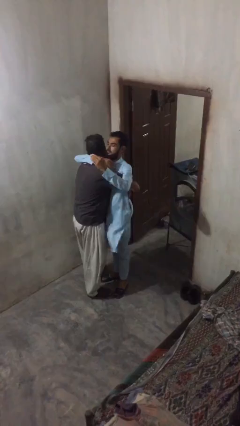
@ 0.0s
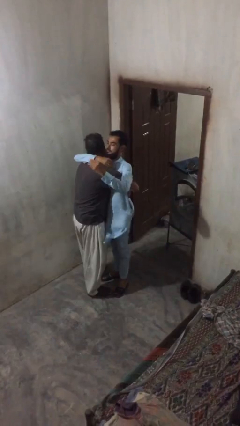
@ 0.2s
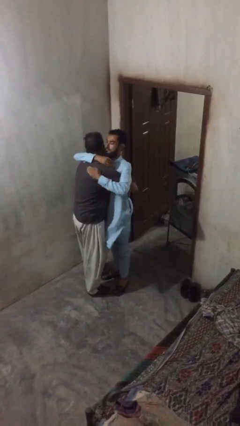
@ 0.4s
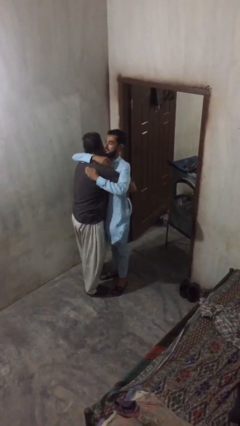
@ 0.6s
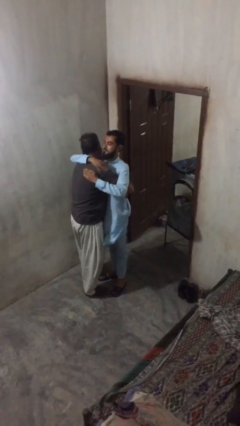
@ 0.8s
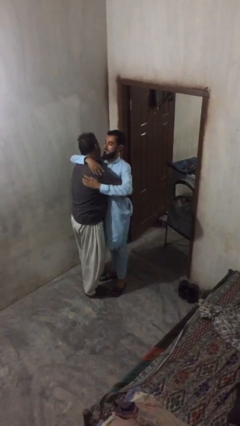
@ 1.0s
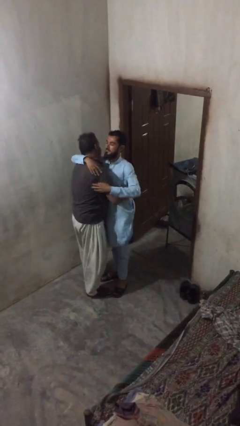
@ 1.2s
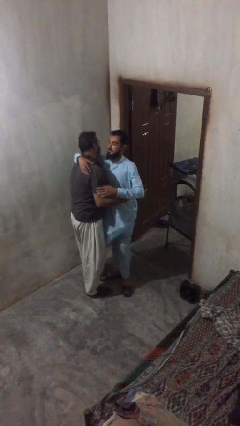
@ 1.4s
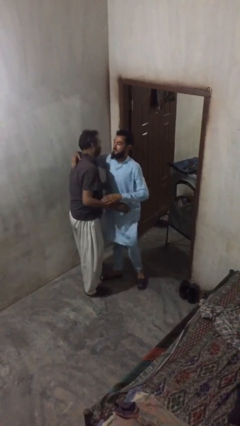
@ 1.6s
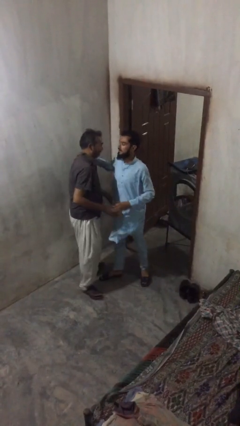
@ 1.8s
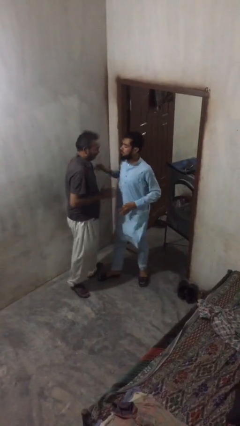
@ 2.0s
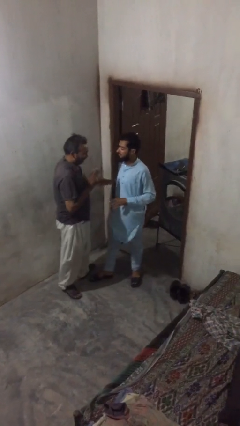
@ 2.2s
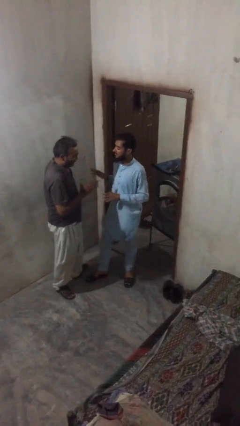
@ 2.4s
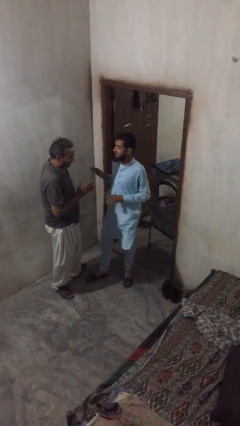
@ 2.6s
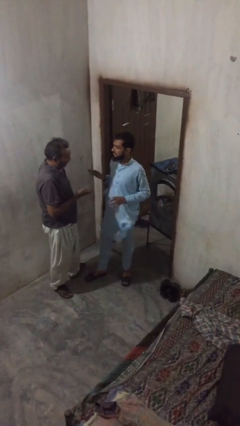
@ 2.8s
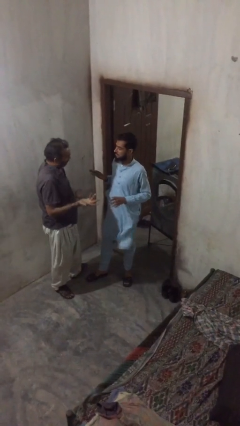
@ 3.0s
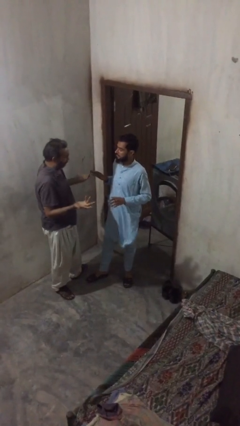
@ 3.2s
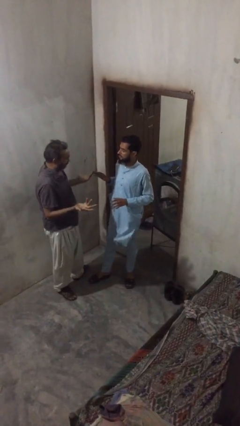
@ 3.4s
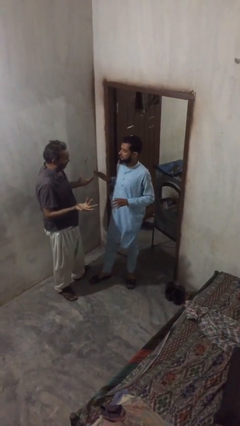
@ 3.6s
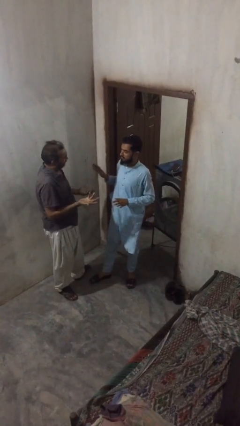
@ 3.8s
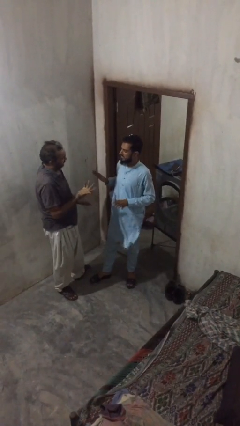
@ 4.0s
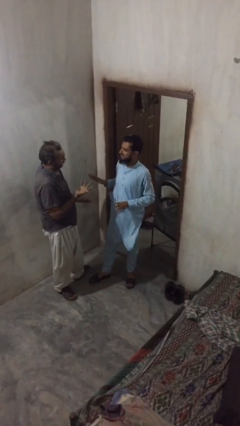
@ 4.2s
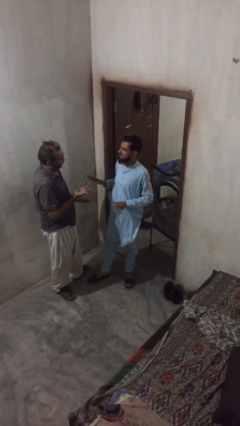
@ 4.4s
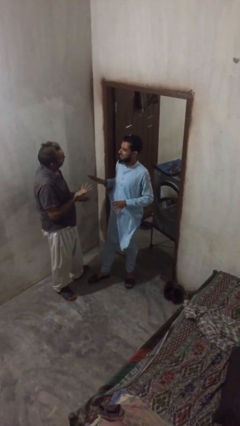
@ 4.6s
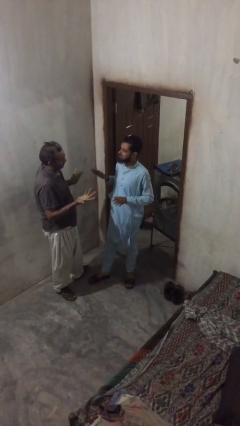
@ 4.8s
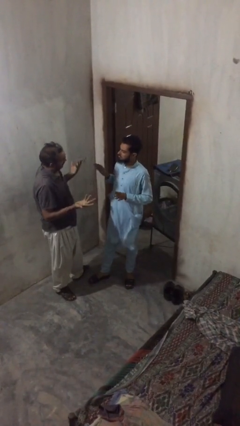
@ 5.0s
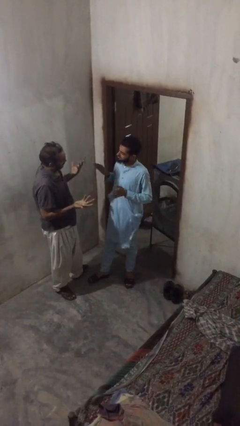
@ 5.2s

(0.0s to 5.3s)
person talks to person

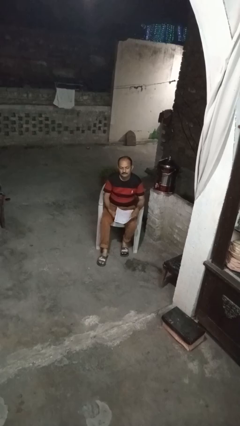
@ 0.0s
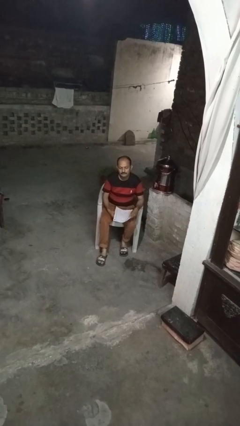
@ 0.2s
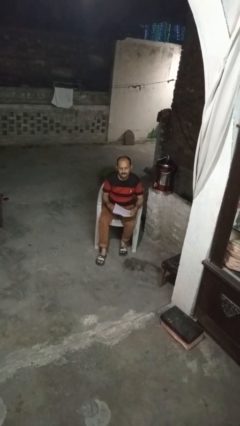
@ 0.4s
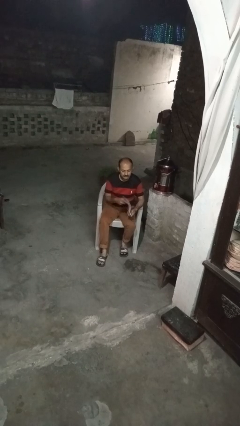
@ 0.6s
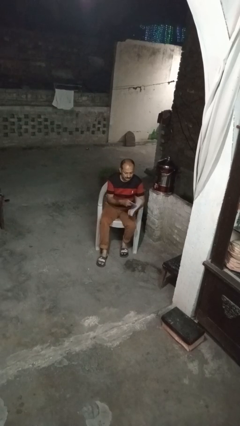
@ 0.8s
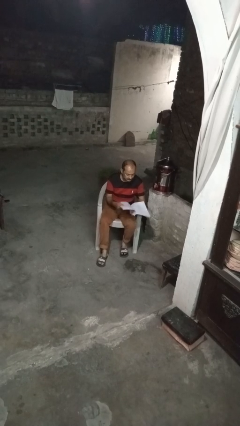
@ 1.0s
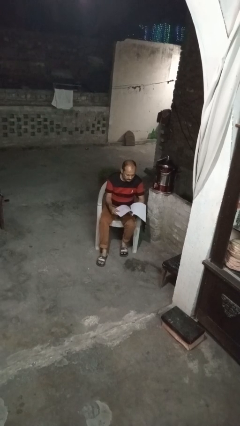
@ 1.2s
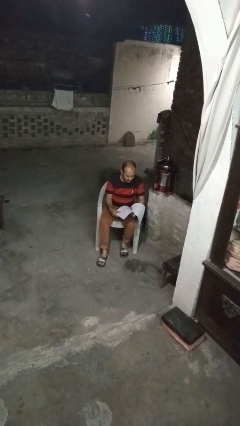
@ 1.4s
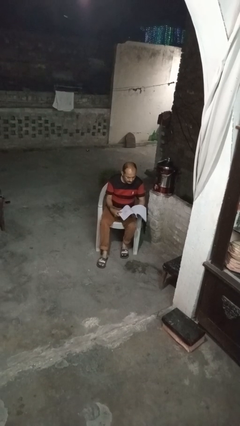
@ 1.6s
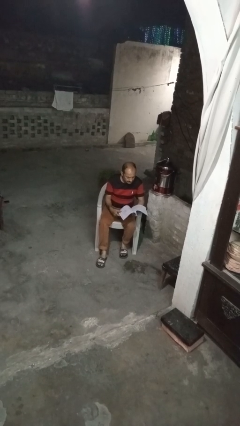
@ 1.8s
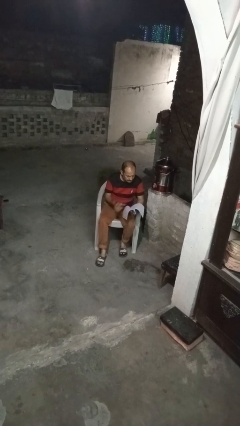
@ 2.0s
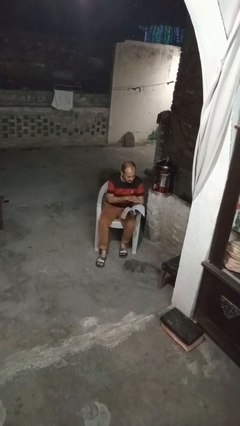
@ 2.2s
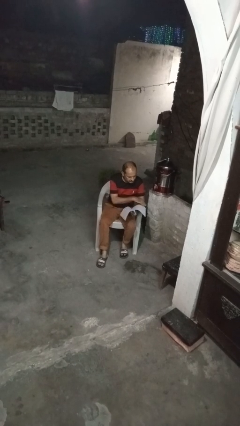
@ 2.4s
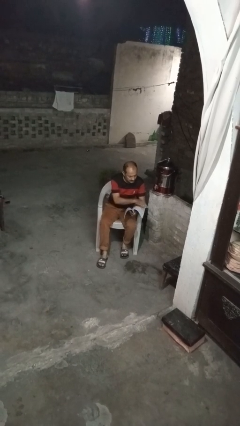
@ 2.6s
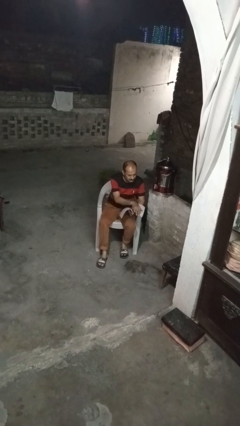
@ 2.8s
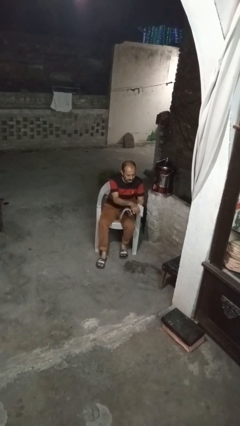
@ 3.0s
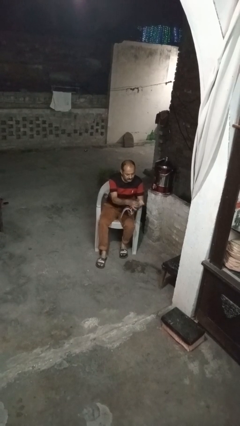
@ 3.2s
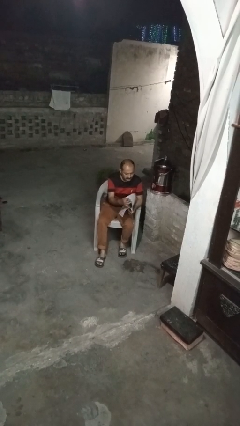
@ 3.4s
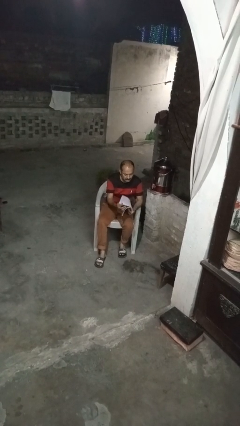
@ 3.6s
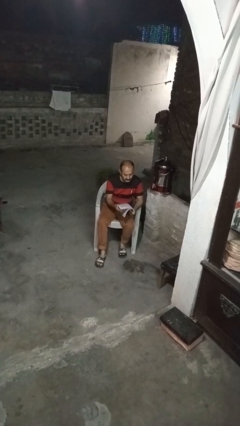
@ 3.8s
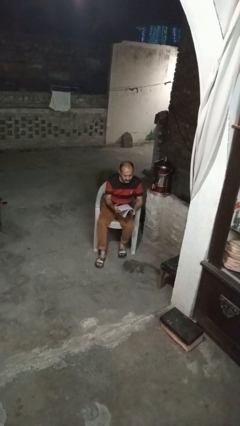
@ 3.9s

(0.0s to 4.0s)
person reads magazine

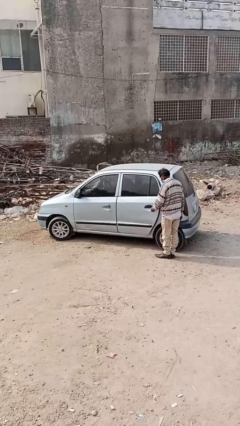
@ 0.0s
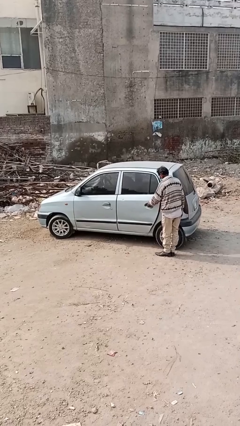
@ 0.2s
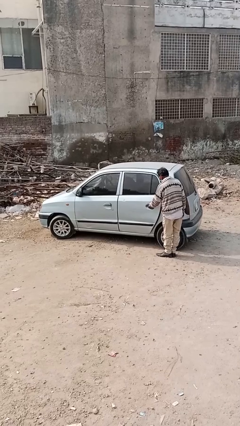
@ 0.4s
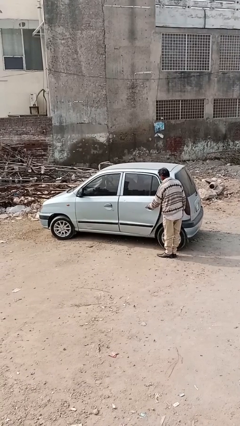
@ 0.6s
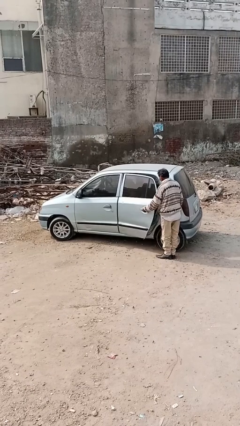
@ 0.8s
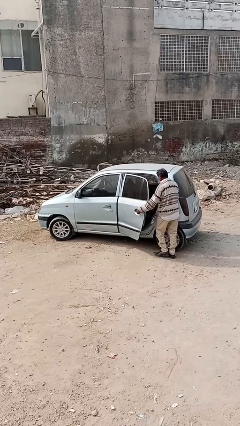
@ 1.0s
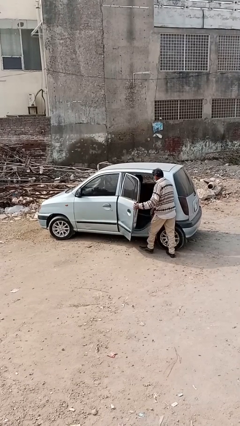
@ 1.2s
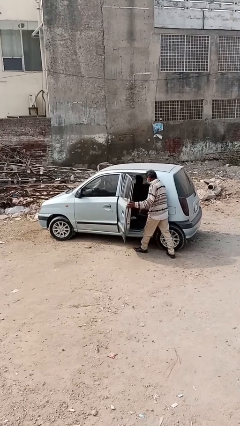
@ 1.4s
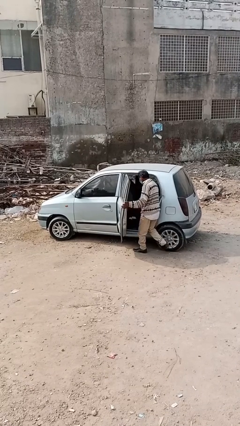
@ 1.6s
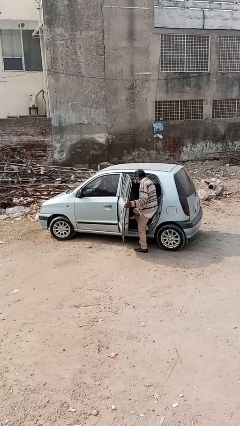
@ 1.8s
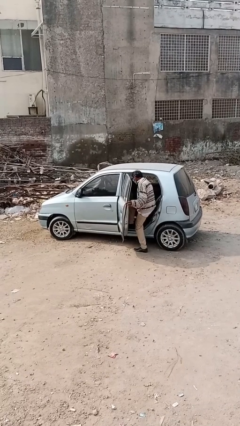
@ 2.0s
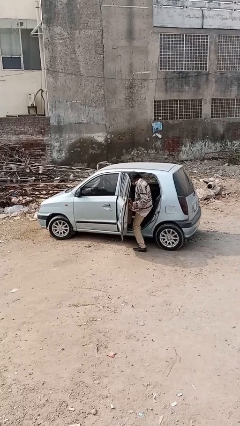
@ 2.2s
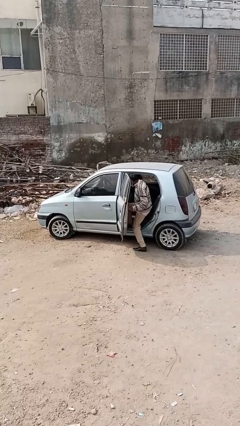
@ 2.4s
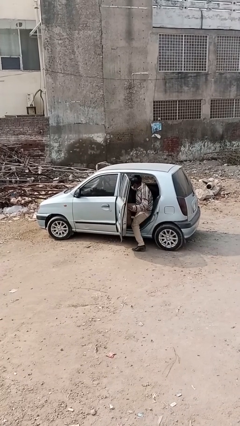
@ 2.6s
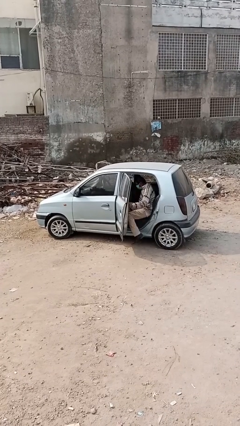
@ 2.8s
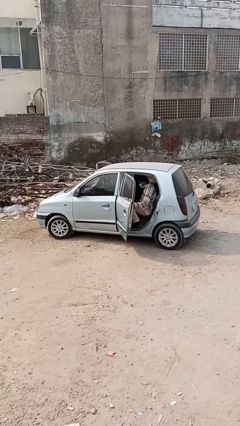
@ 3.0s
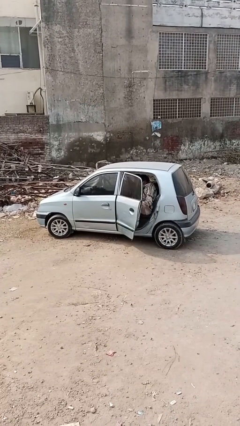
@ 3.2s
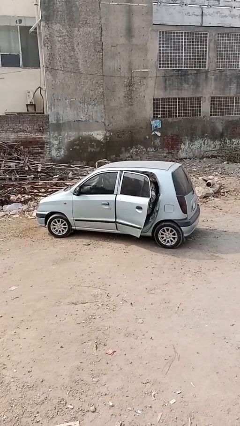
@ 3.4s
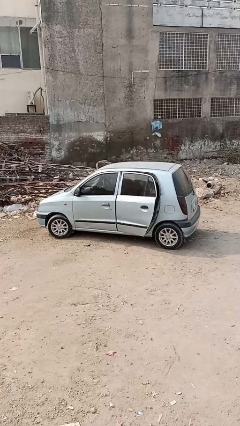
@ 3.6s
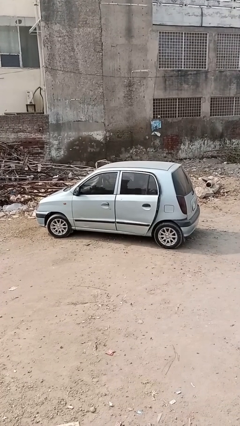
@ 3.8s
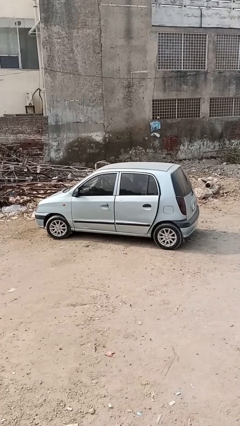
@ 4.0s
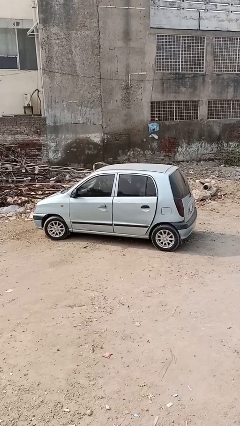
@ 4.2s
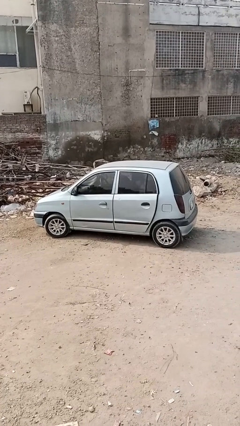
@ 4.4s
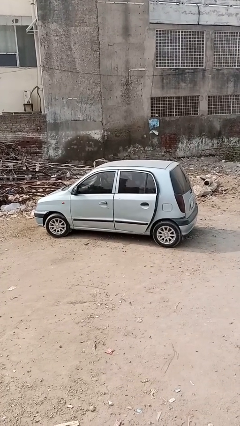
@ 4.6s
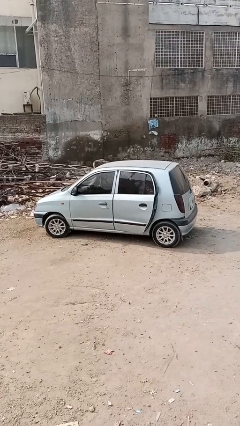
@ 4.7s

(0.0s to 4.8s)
car picks up person

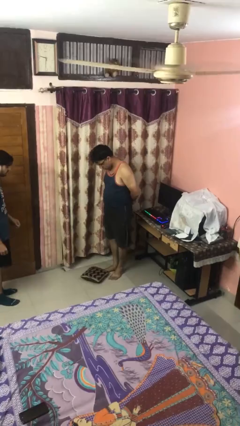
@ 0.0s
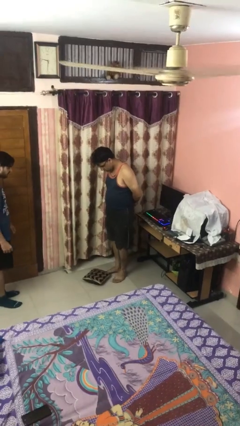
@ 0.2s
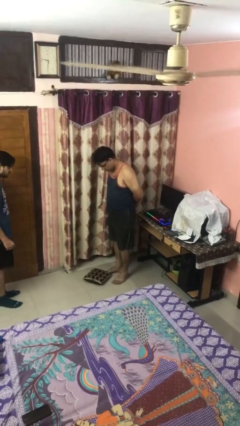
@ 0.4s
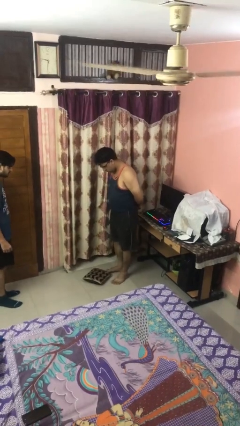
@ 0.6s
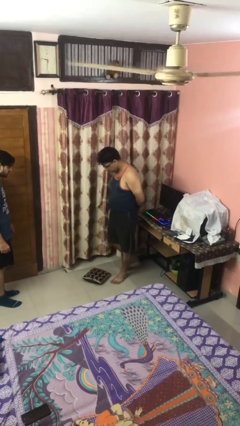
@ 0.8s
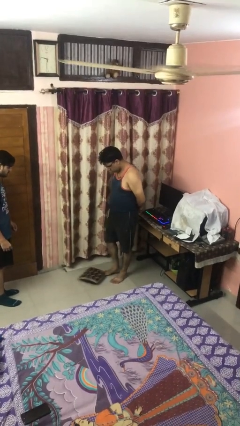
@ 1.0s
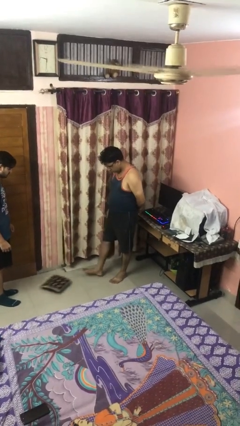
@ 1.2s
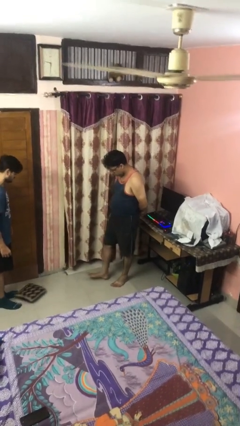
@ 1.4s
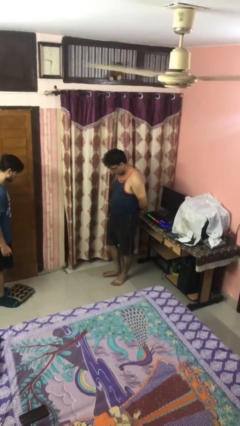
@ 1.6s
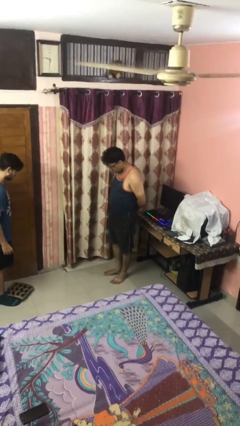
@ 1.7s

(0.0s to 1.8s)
person kicks object to person

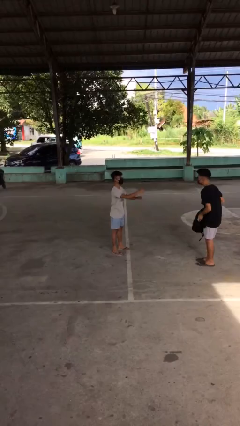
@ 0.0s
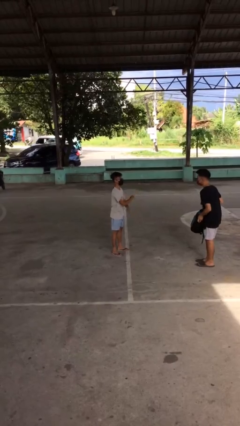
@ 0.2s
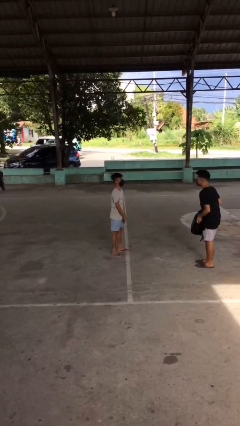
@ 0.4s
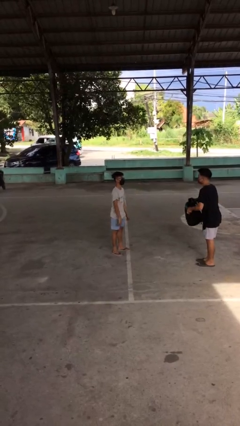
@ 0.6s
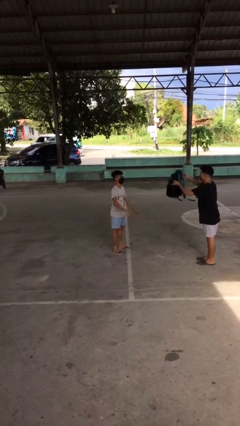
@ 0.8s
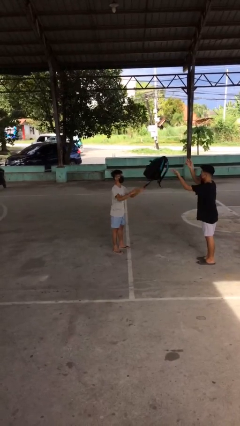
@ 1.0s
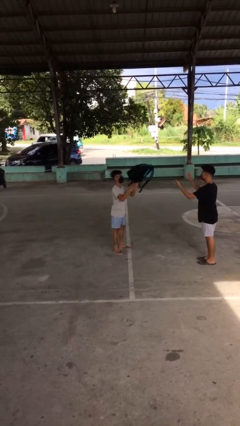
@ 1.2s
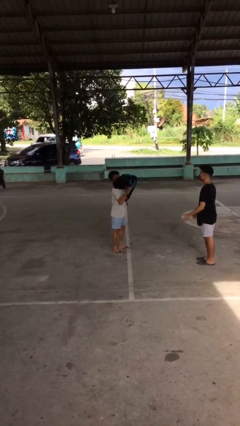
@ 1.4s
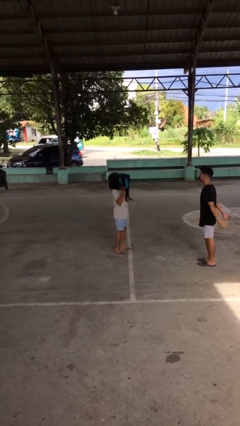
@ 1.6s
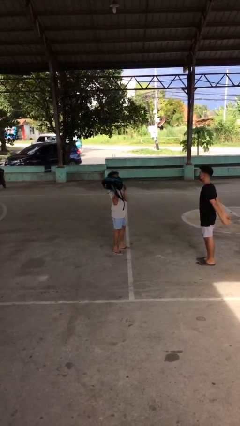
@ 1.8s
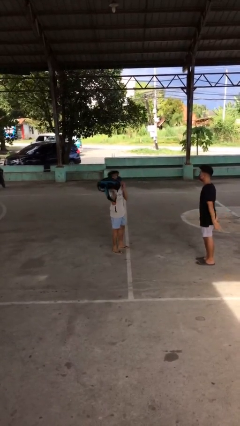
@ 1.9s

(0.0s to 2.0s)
person catches object from person
